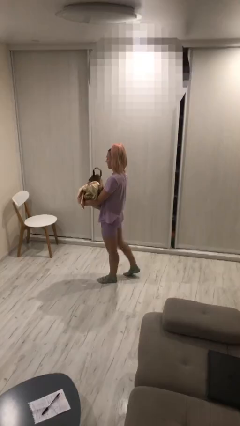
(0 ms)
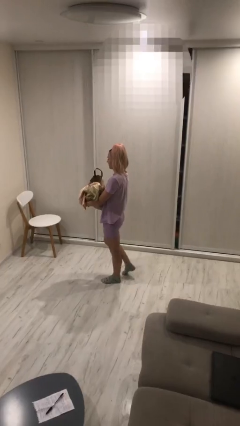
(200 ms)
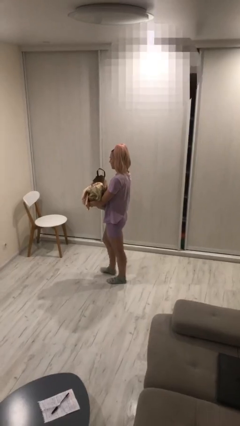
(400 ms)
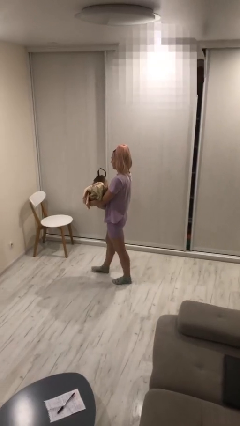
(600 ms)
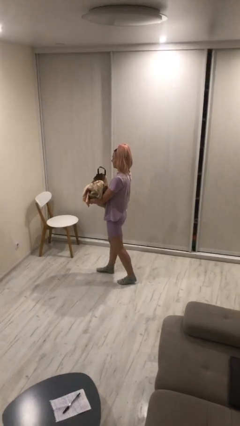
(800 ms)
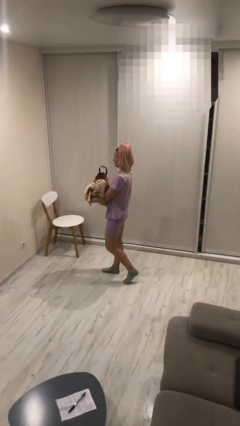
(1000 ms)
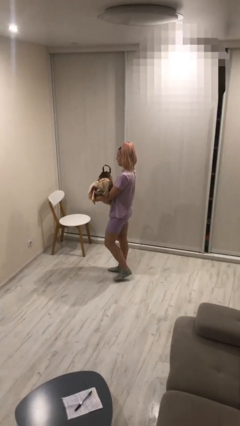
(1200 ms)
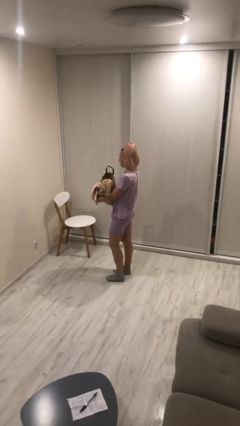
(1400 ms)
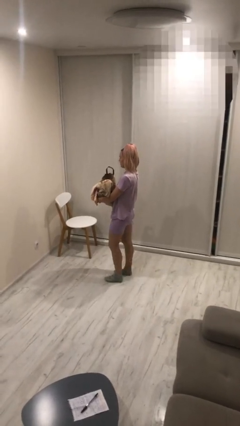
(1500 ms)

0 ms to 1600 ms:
person carries laundry basket

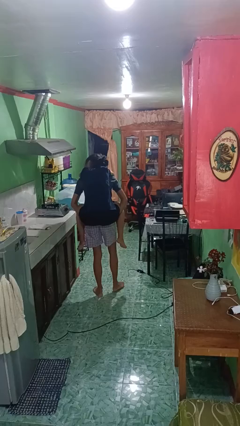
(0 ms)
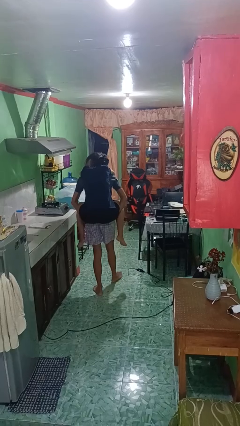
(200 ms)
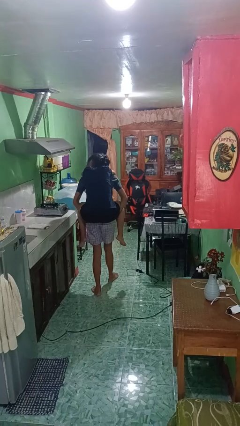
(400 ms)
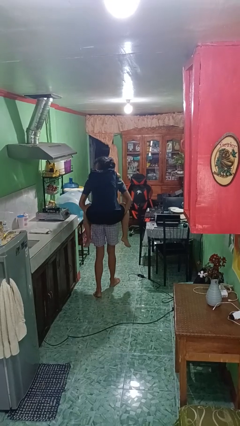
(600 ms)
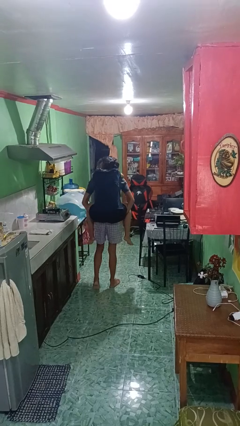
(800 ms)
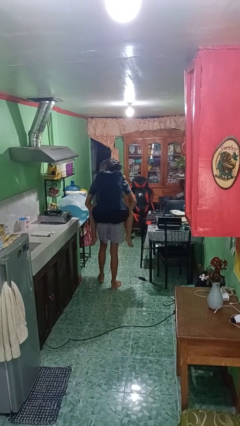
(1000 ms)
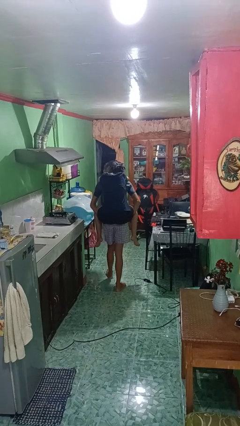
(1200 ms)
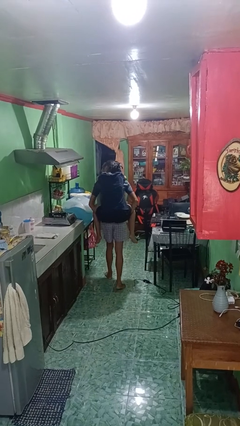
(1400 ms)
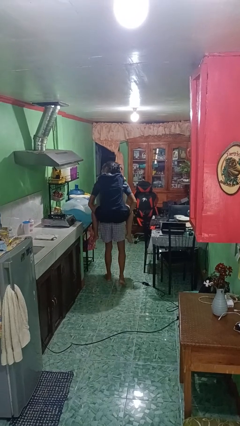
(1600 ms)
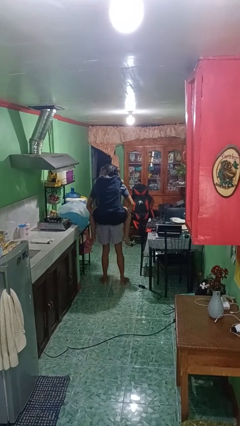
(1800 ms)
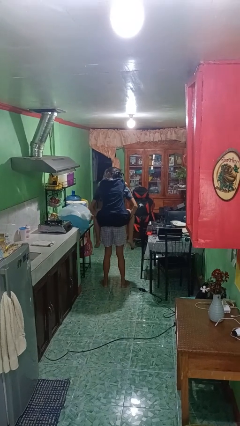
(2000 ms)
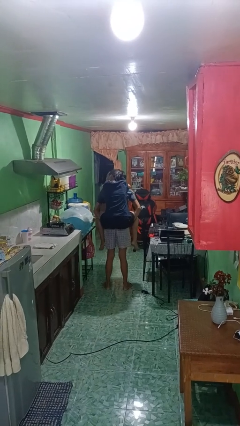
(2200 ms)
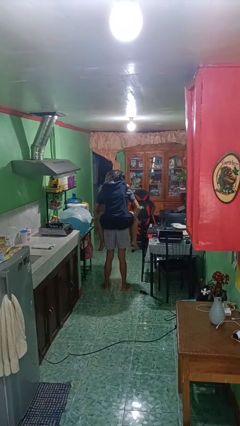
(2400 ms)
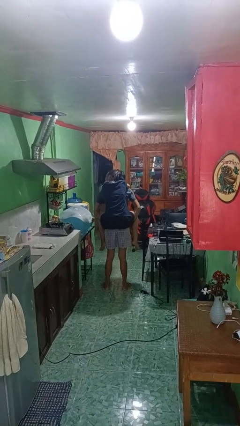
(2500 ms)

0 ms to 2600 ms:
person carries person on back

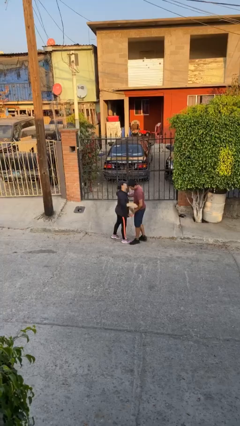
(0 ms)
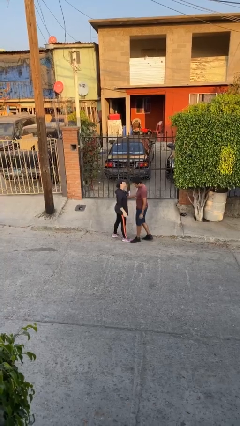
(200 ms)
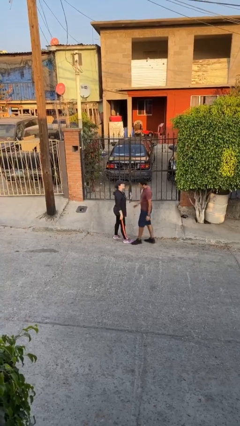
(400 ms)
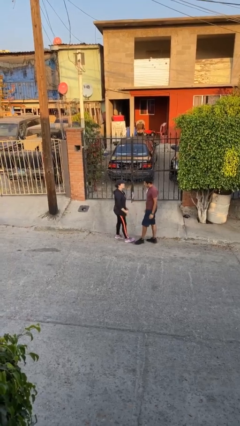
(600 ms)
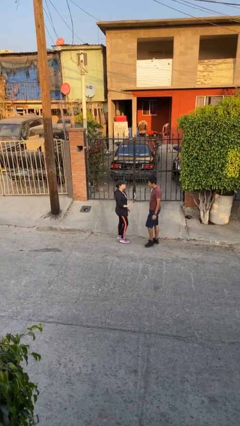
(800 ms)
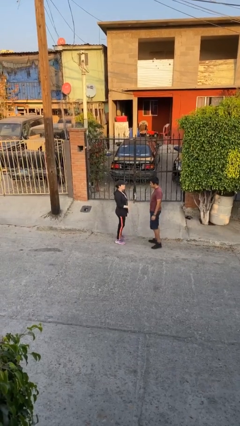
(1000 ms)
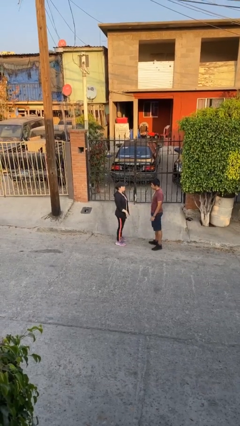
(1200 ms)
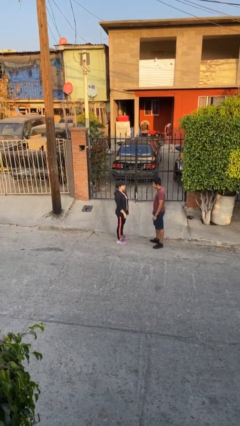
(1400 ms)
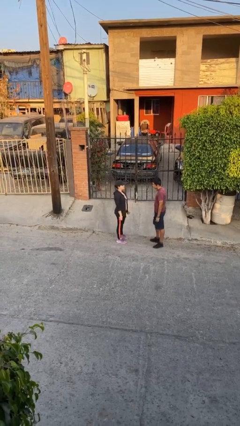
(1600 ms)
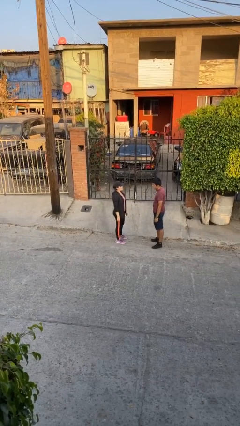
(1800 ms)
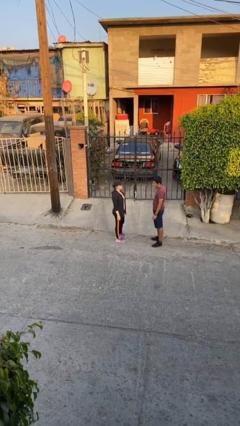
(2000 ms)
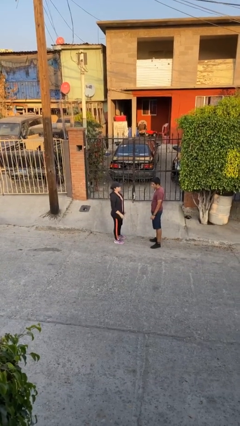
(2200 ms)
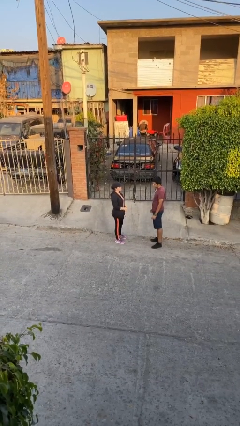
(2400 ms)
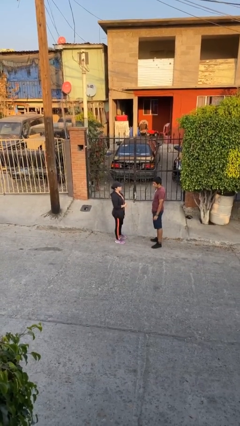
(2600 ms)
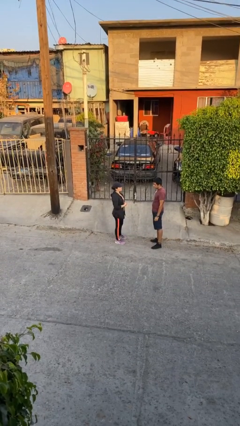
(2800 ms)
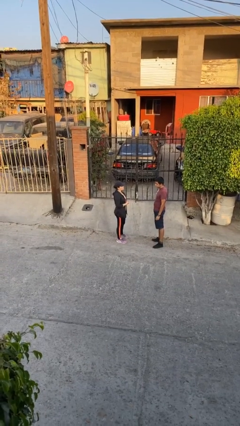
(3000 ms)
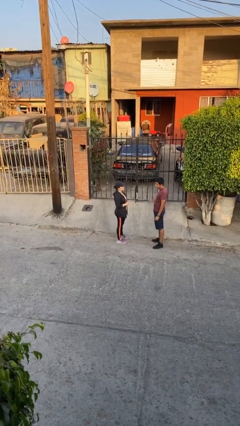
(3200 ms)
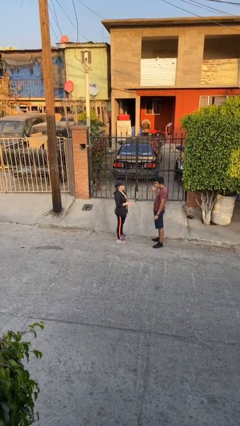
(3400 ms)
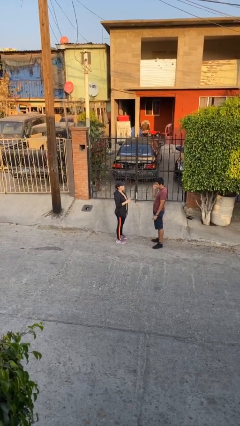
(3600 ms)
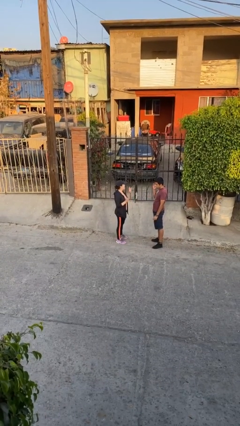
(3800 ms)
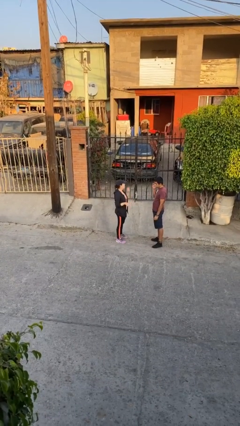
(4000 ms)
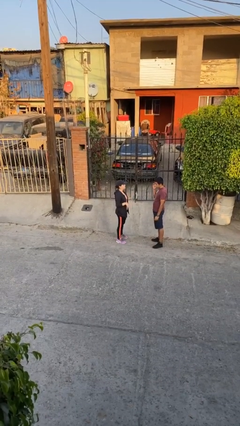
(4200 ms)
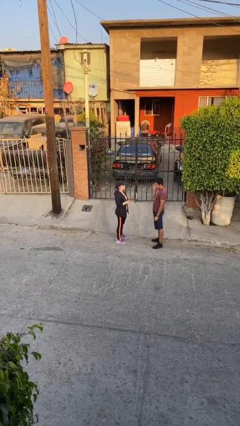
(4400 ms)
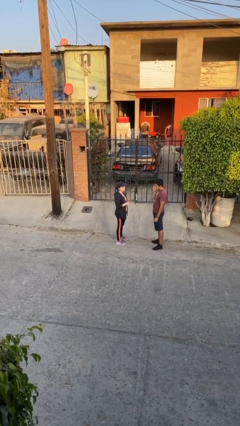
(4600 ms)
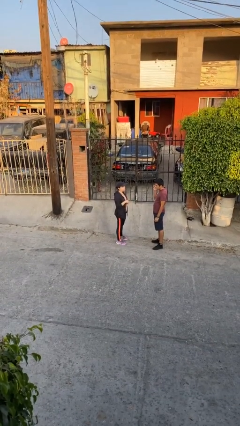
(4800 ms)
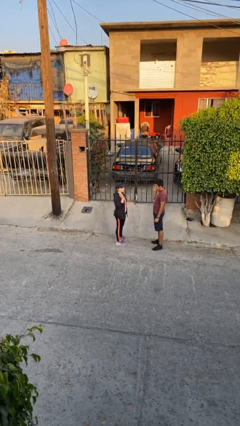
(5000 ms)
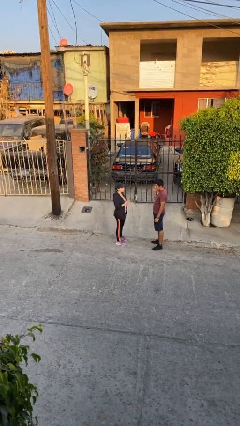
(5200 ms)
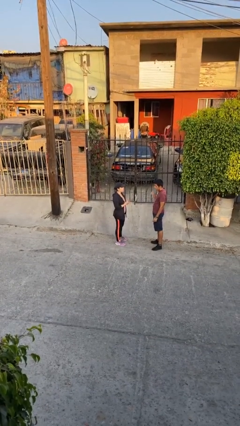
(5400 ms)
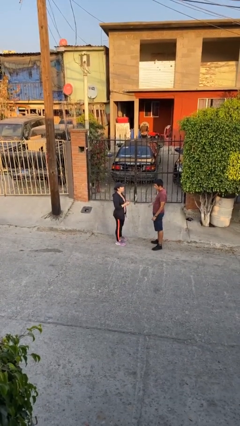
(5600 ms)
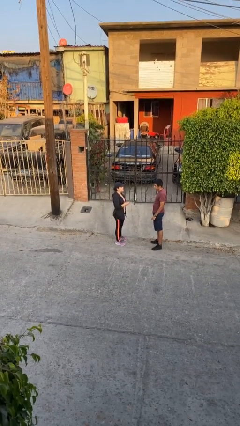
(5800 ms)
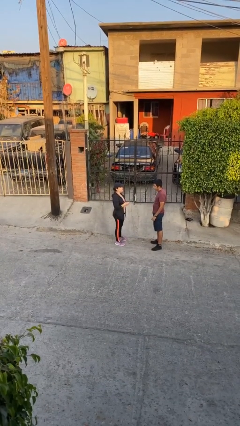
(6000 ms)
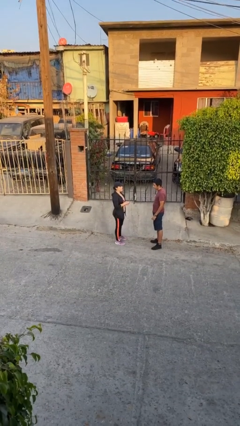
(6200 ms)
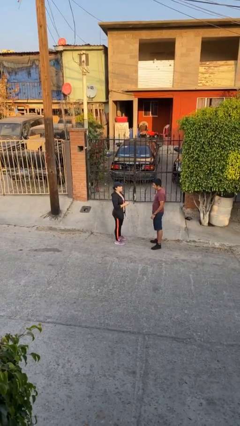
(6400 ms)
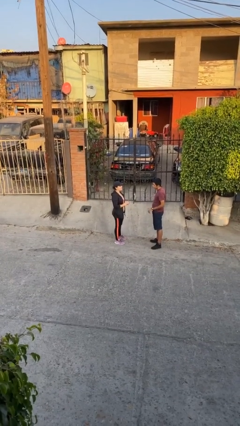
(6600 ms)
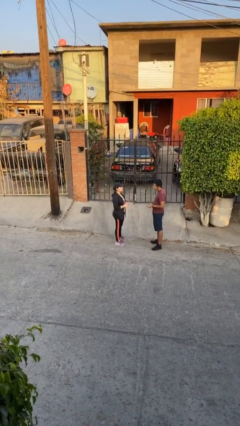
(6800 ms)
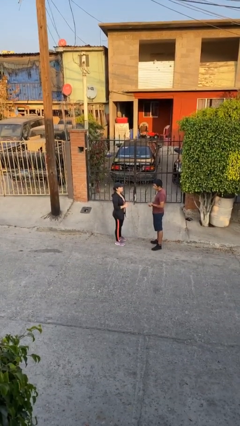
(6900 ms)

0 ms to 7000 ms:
person talks to person

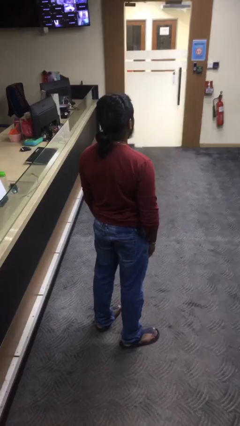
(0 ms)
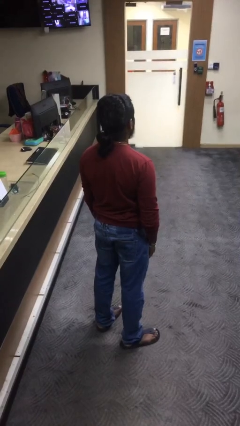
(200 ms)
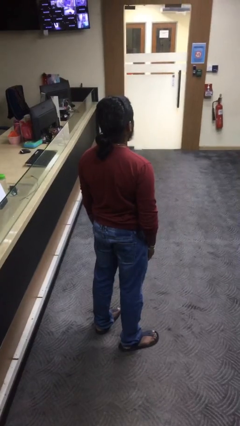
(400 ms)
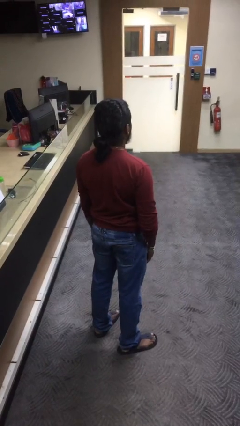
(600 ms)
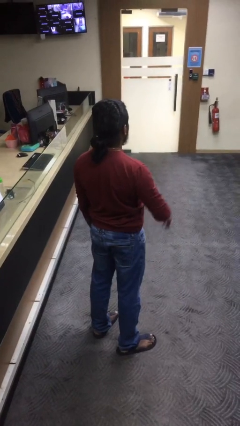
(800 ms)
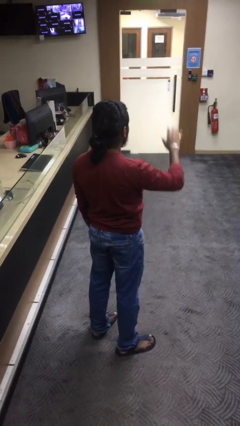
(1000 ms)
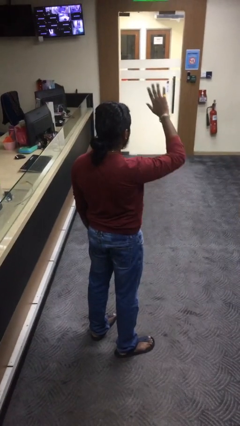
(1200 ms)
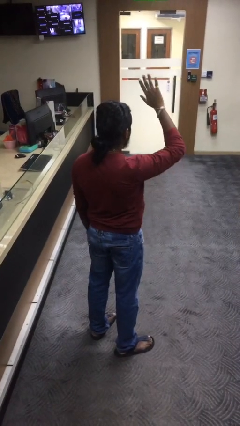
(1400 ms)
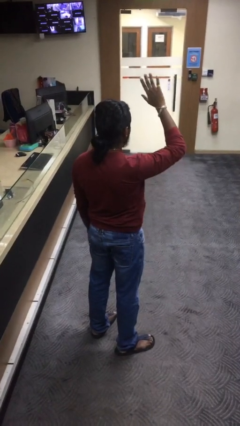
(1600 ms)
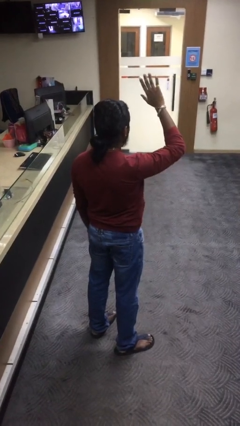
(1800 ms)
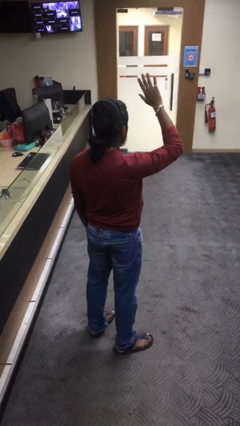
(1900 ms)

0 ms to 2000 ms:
person gestures raise hand

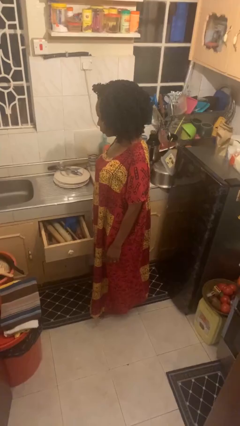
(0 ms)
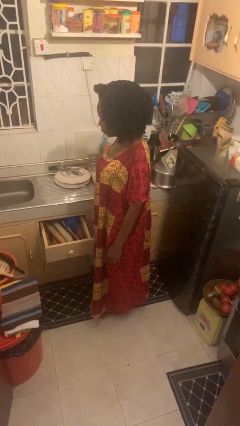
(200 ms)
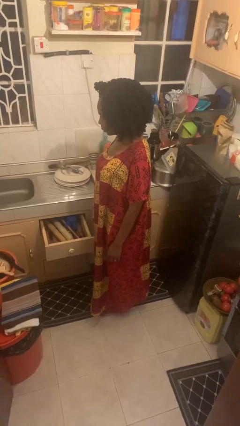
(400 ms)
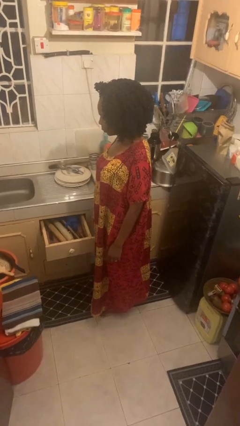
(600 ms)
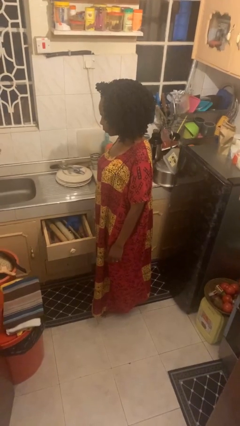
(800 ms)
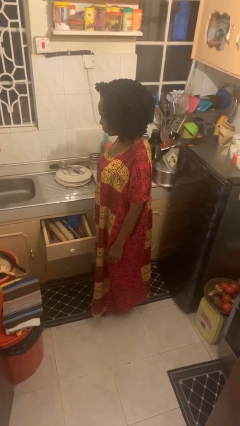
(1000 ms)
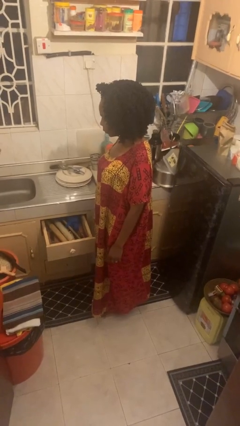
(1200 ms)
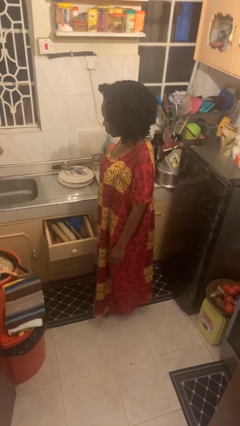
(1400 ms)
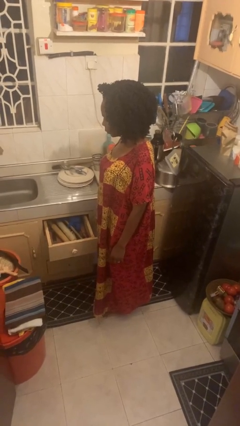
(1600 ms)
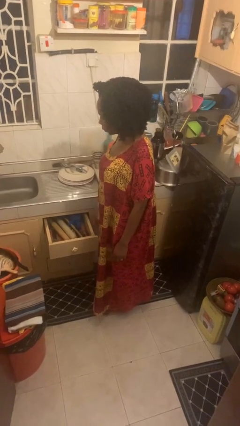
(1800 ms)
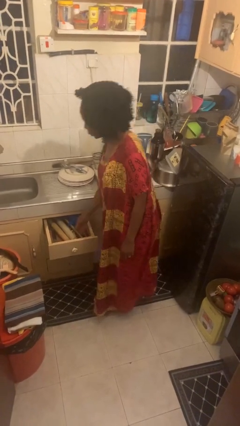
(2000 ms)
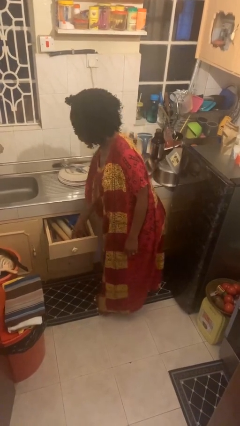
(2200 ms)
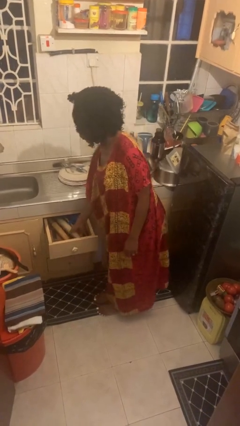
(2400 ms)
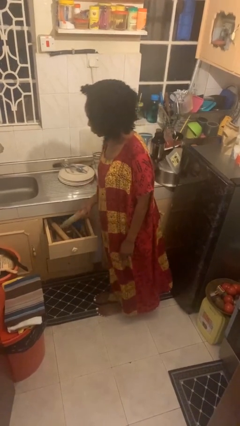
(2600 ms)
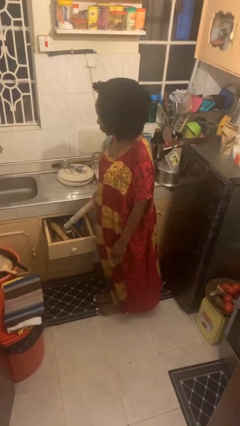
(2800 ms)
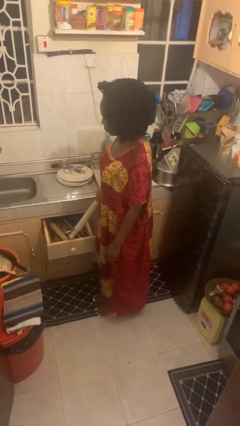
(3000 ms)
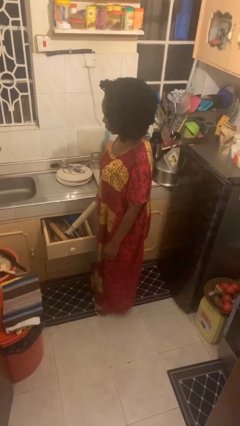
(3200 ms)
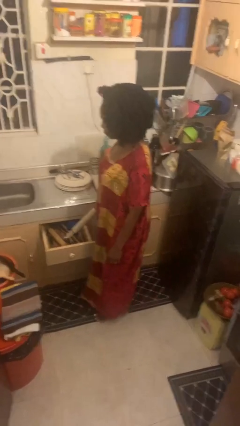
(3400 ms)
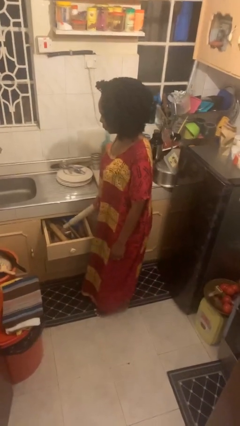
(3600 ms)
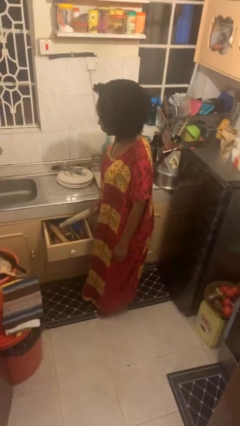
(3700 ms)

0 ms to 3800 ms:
person takes object from kitchen drawer

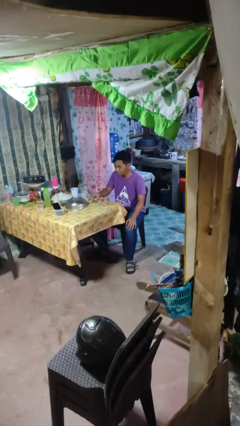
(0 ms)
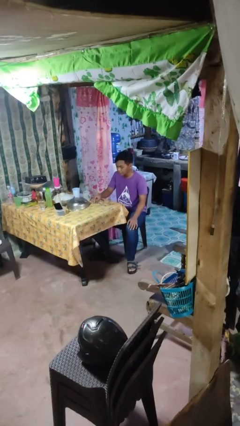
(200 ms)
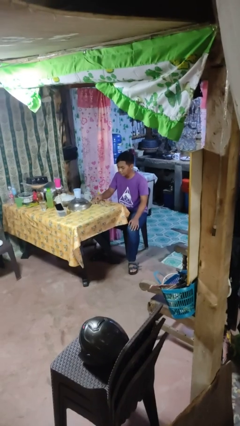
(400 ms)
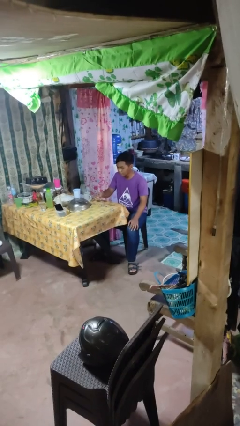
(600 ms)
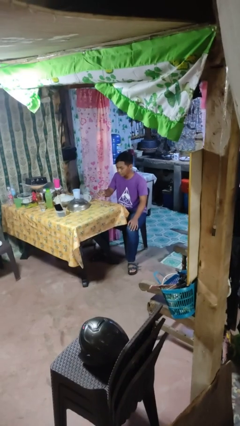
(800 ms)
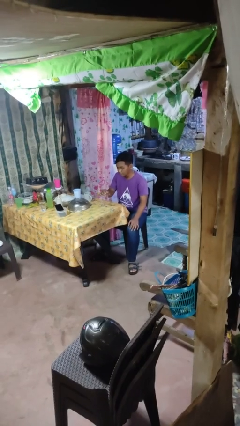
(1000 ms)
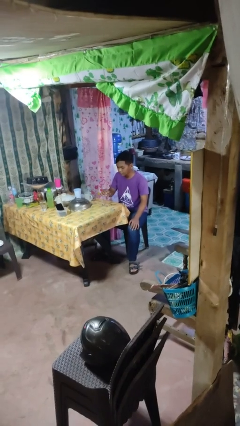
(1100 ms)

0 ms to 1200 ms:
person picks up object from table
